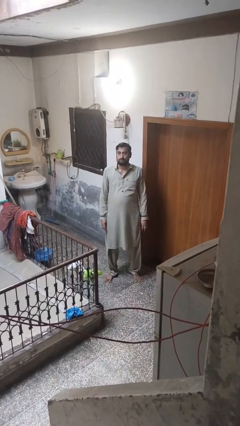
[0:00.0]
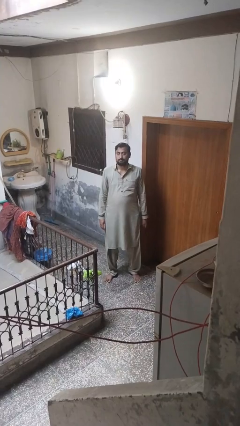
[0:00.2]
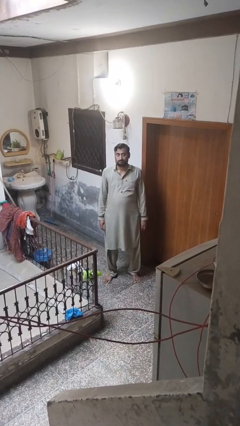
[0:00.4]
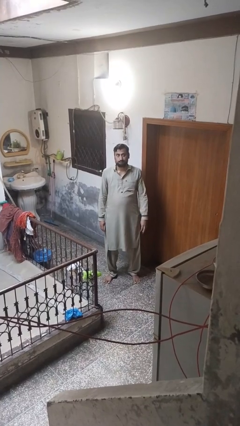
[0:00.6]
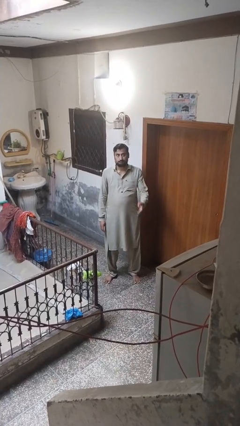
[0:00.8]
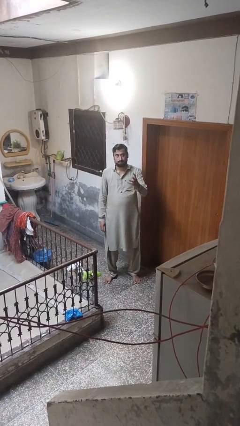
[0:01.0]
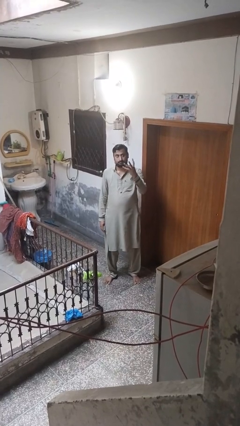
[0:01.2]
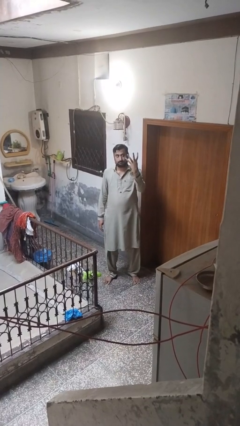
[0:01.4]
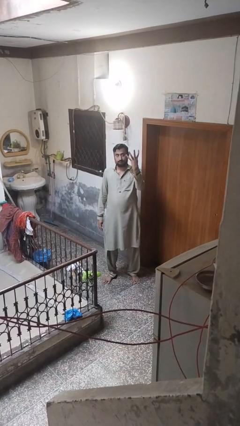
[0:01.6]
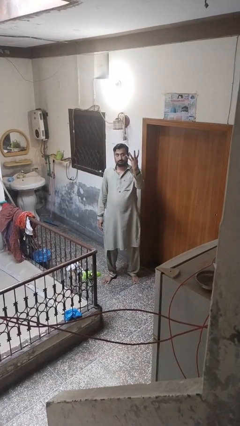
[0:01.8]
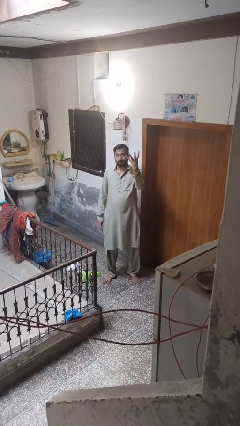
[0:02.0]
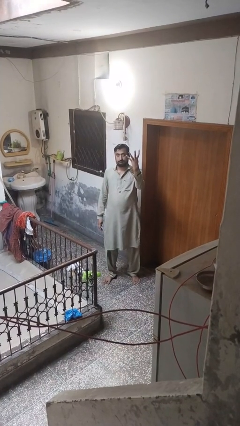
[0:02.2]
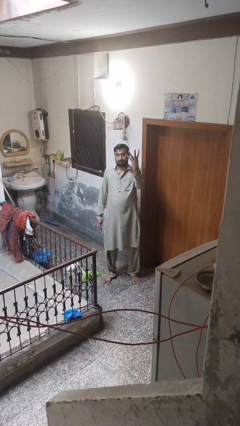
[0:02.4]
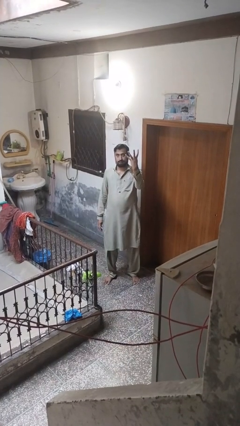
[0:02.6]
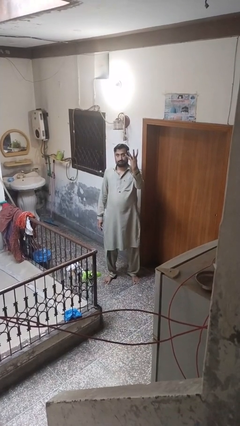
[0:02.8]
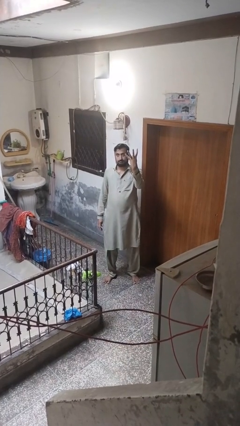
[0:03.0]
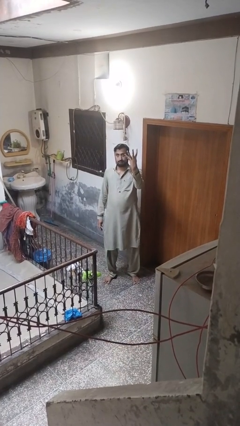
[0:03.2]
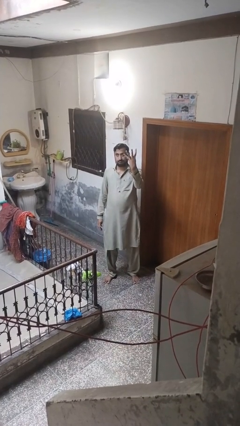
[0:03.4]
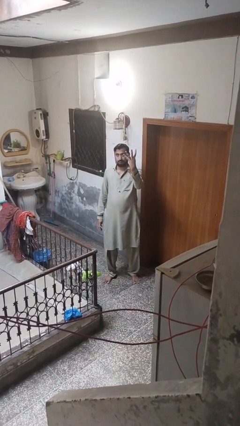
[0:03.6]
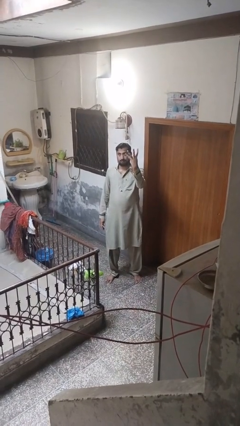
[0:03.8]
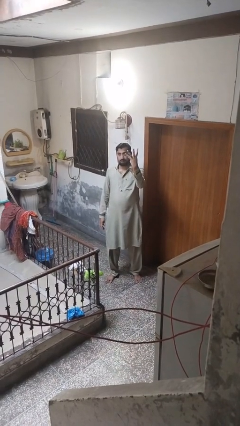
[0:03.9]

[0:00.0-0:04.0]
person gestures number four

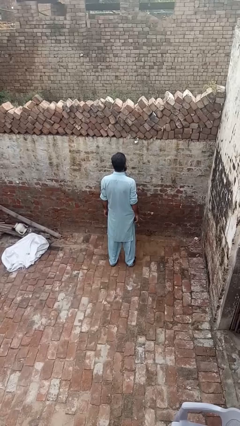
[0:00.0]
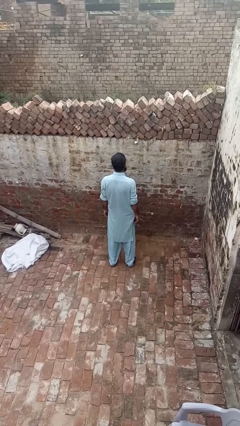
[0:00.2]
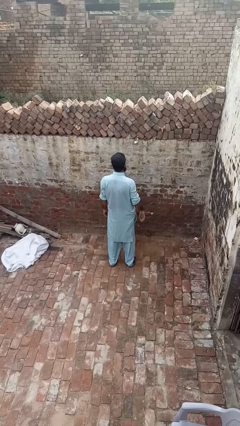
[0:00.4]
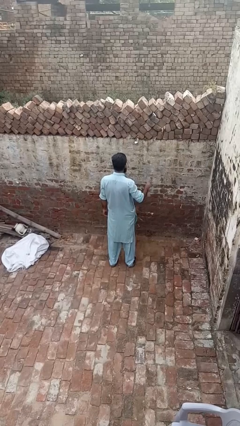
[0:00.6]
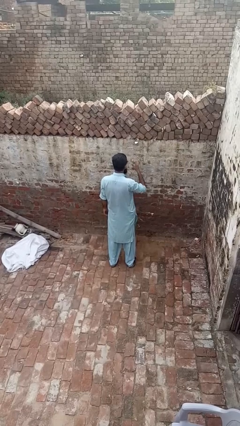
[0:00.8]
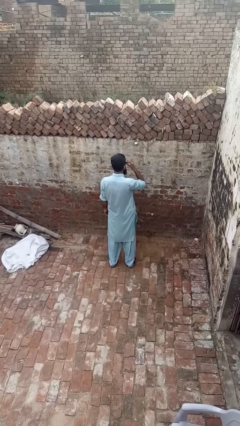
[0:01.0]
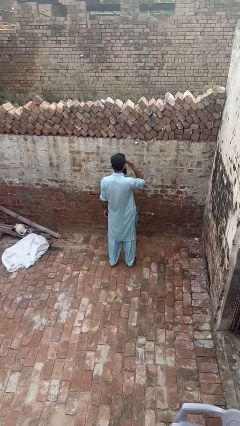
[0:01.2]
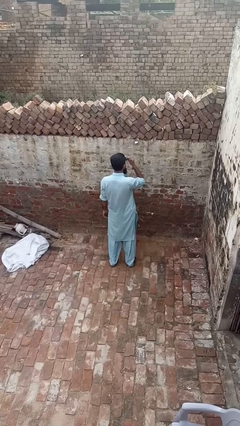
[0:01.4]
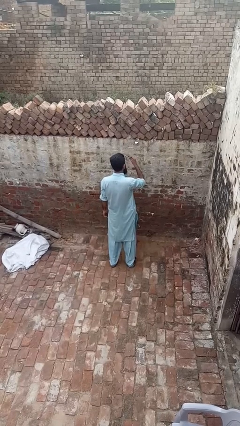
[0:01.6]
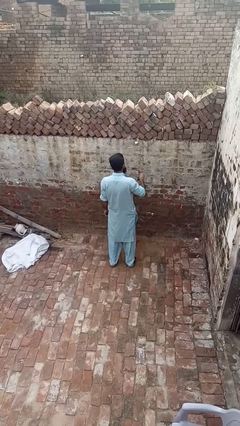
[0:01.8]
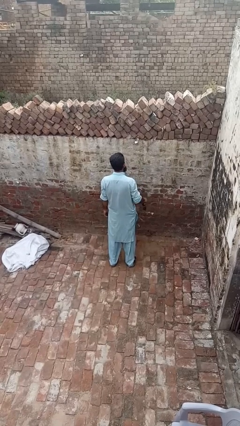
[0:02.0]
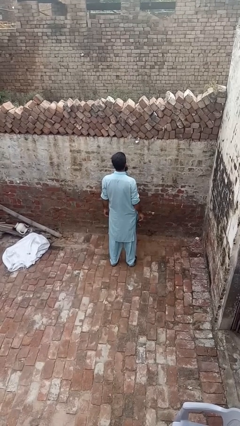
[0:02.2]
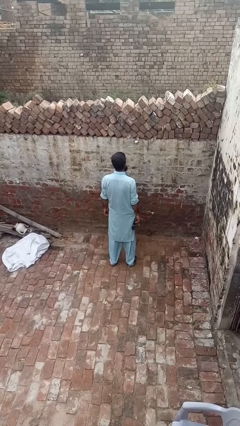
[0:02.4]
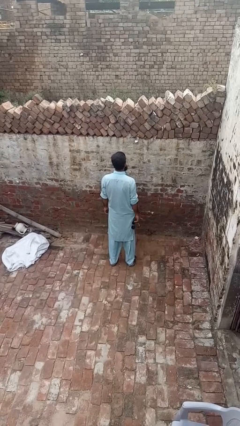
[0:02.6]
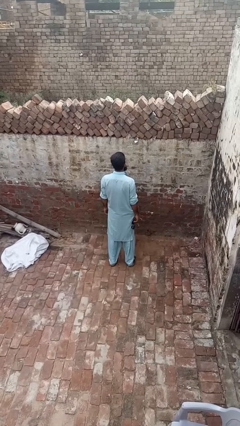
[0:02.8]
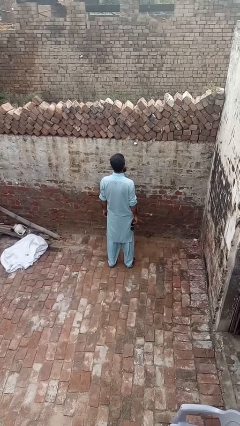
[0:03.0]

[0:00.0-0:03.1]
person takes off sunglasses

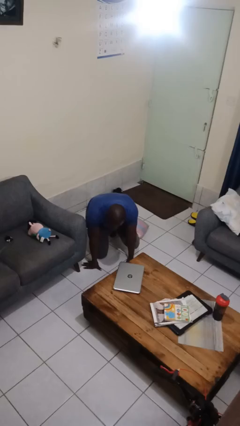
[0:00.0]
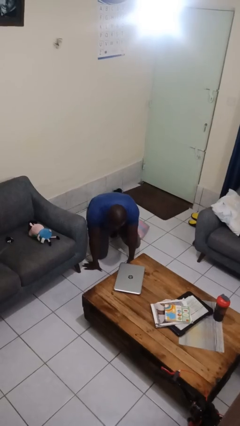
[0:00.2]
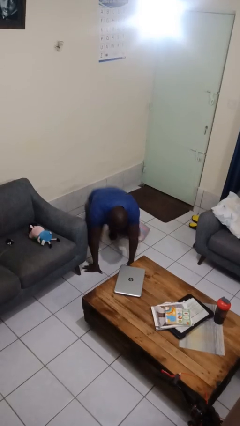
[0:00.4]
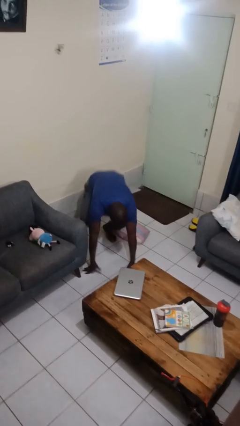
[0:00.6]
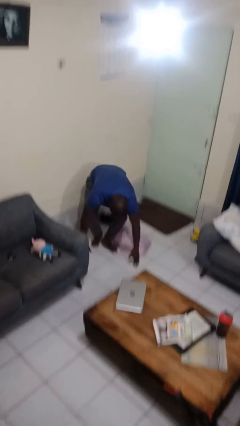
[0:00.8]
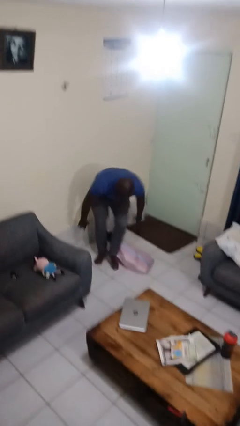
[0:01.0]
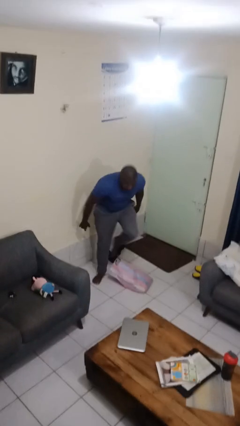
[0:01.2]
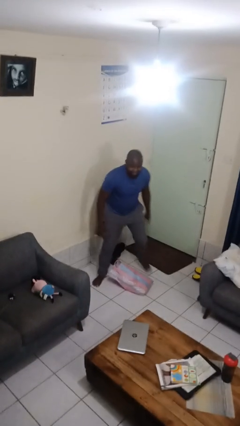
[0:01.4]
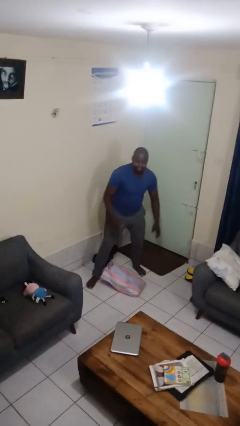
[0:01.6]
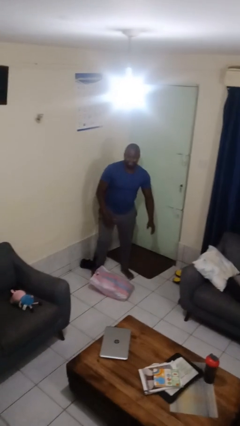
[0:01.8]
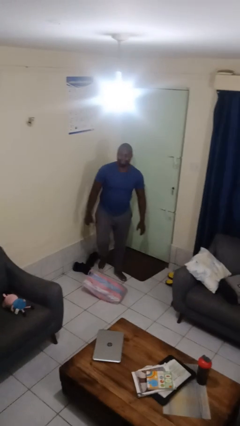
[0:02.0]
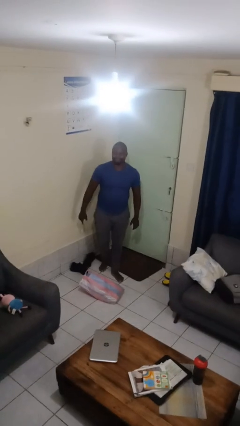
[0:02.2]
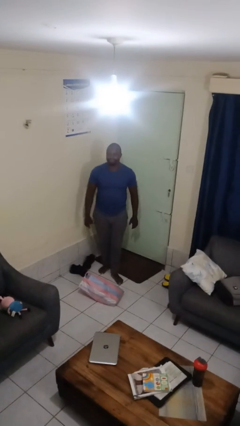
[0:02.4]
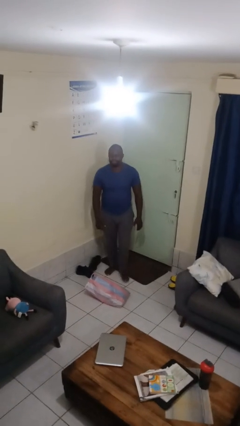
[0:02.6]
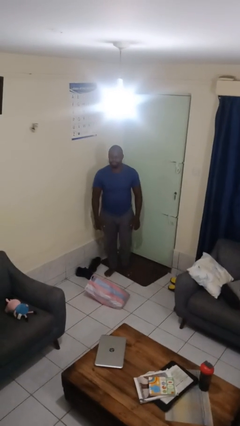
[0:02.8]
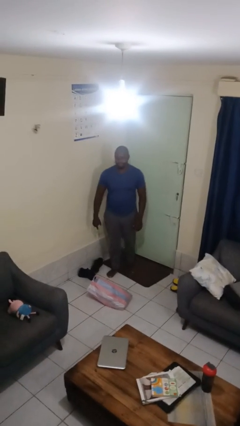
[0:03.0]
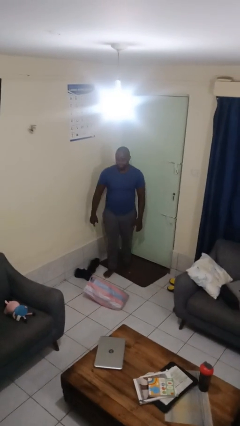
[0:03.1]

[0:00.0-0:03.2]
person stands up from floor

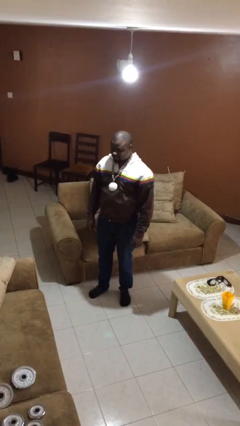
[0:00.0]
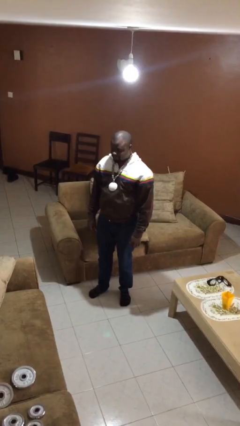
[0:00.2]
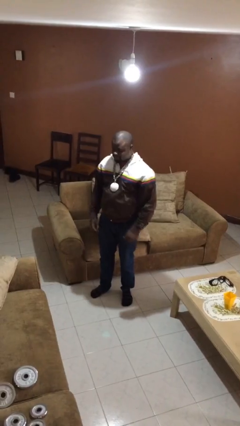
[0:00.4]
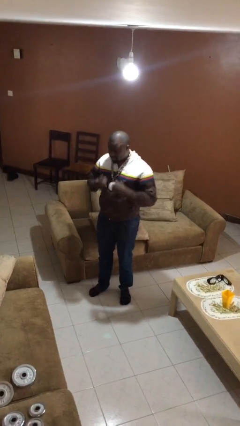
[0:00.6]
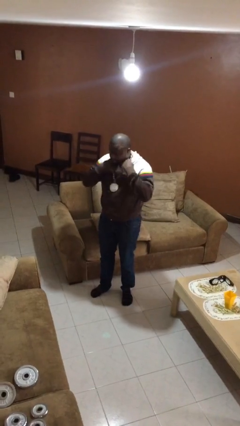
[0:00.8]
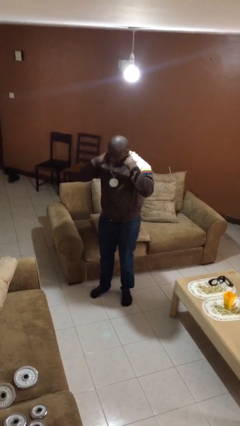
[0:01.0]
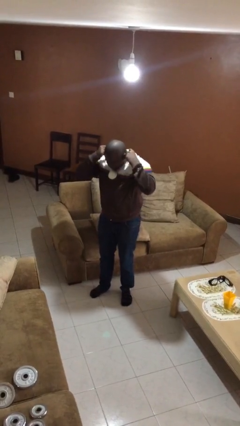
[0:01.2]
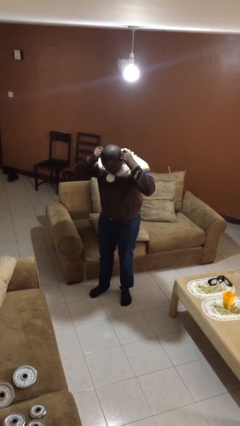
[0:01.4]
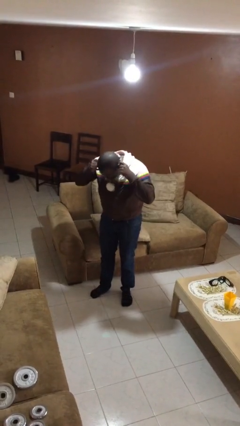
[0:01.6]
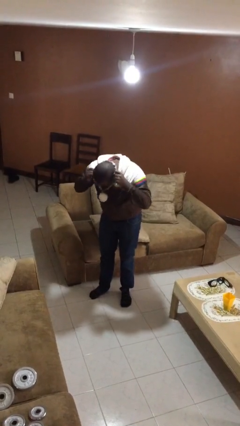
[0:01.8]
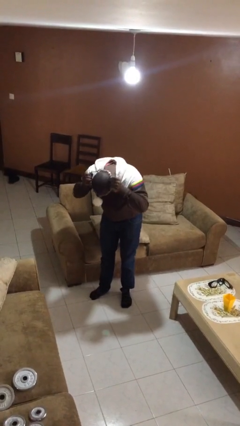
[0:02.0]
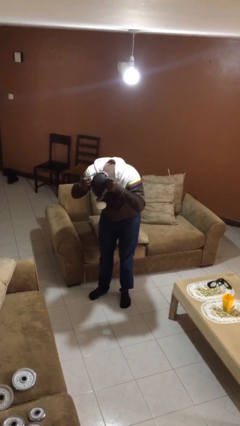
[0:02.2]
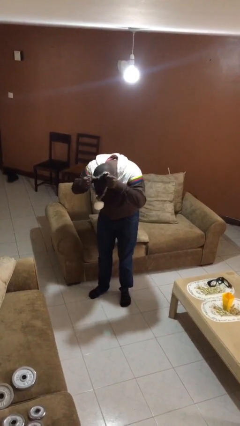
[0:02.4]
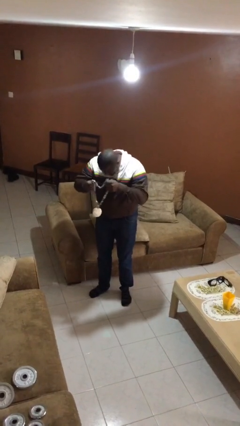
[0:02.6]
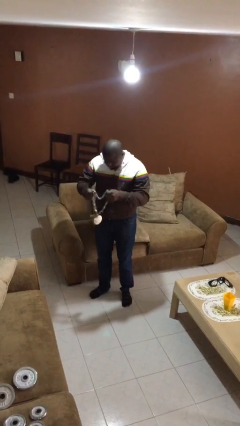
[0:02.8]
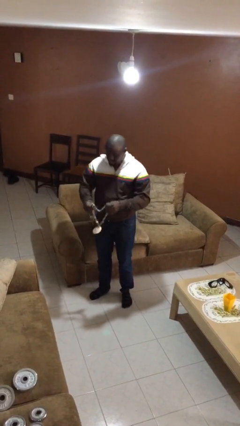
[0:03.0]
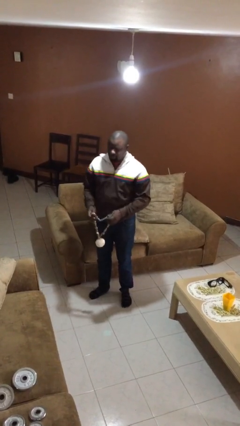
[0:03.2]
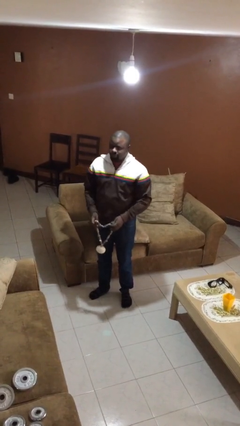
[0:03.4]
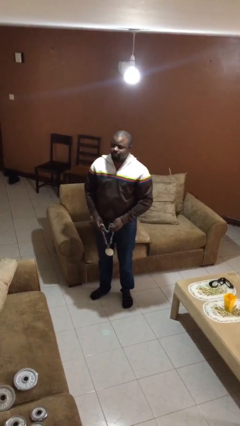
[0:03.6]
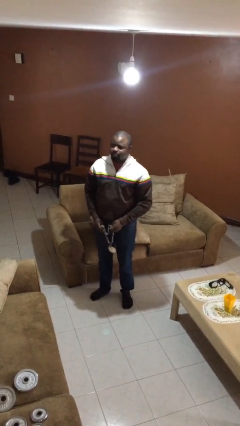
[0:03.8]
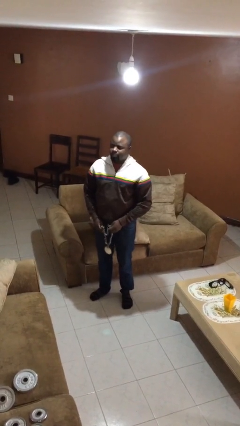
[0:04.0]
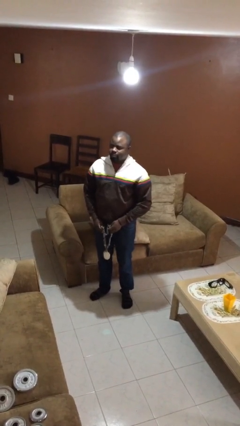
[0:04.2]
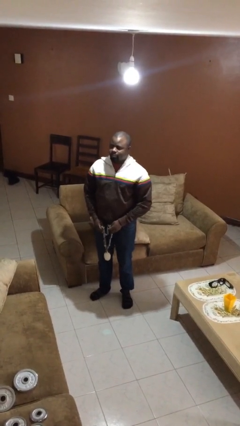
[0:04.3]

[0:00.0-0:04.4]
person takes off necklace

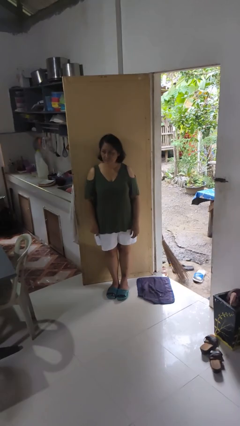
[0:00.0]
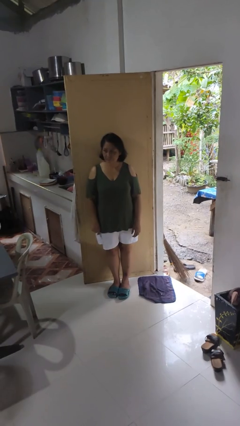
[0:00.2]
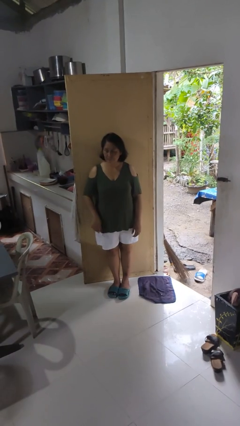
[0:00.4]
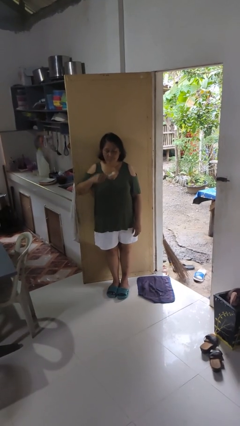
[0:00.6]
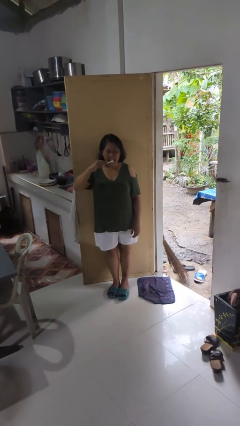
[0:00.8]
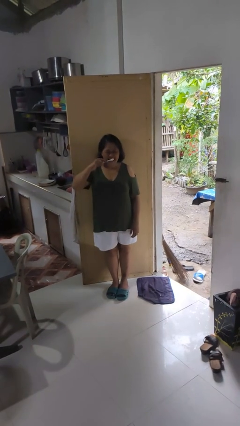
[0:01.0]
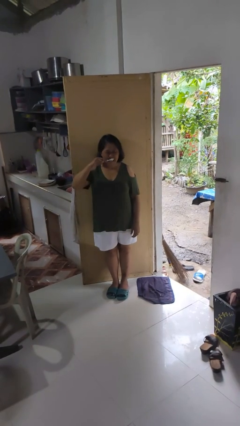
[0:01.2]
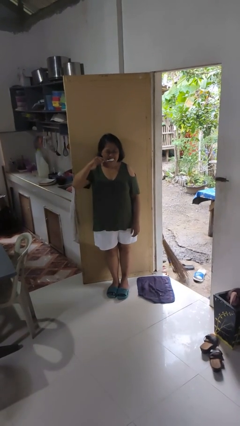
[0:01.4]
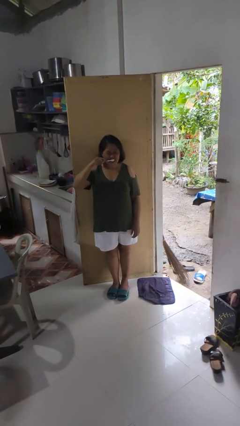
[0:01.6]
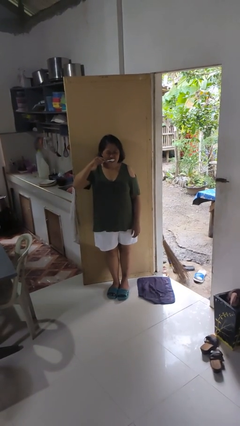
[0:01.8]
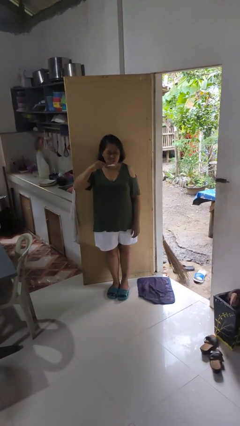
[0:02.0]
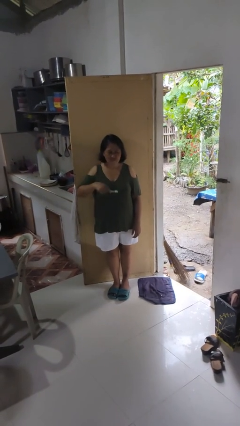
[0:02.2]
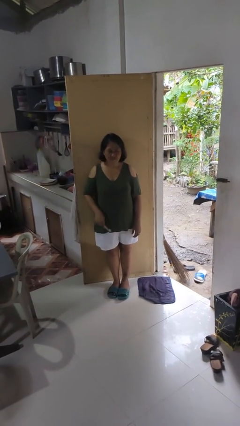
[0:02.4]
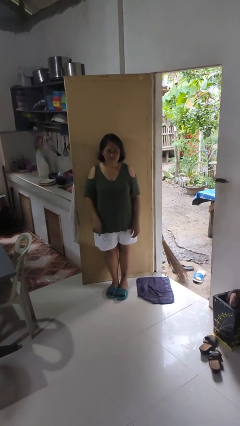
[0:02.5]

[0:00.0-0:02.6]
person brushes teeth

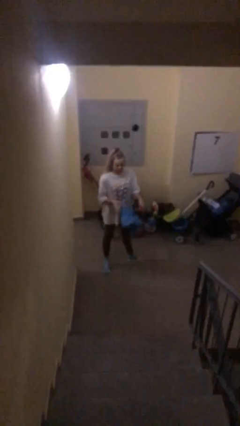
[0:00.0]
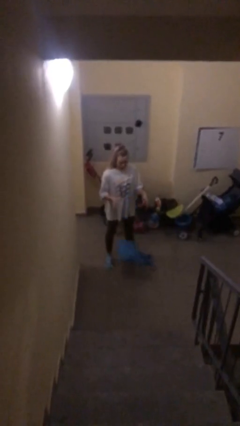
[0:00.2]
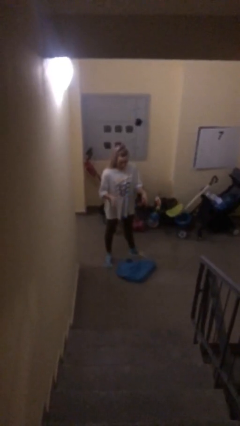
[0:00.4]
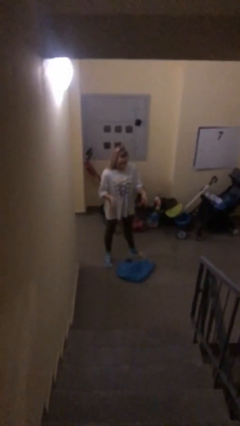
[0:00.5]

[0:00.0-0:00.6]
person drops object
